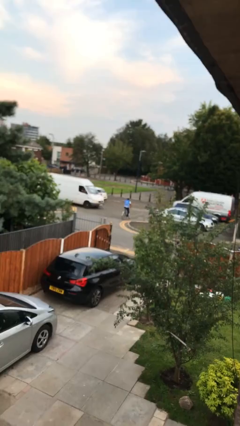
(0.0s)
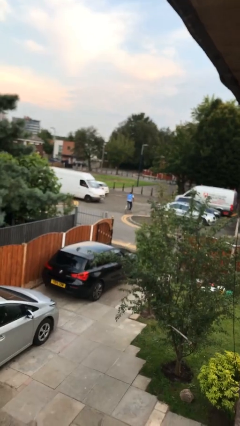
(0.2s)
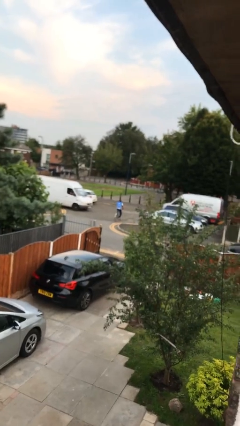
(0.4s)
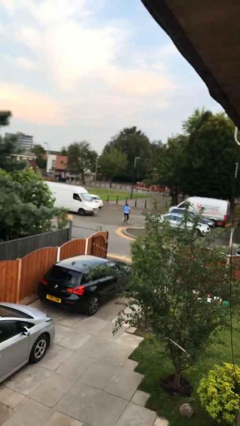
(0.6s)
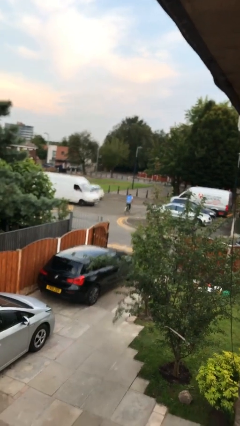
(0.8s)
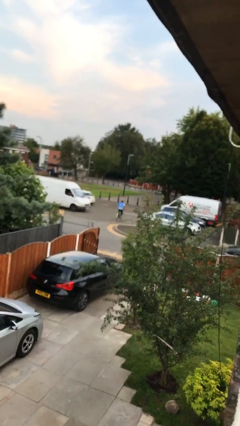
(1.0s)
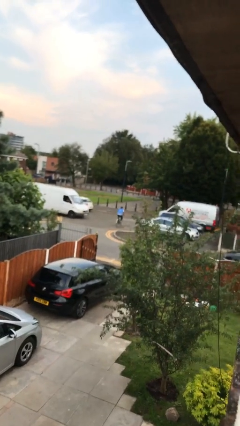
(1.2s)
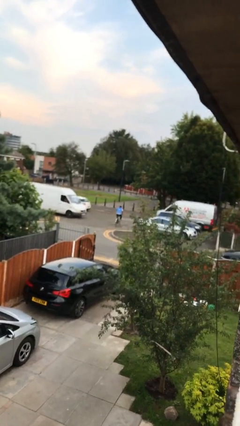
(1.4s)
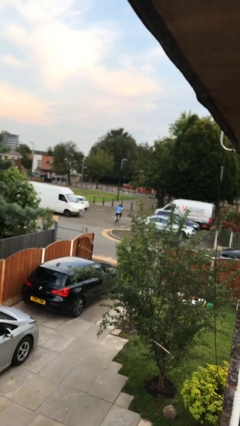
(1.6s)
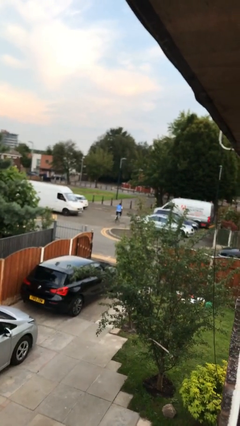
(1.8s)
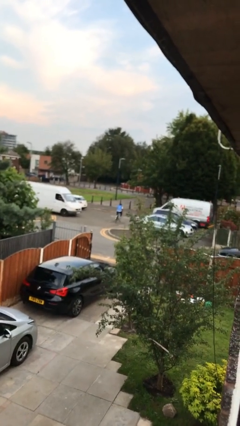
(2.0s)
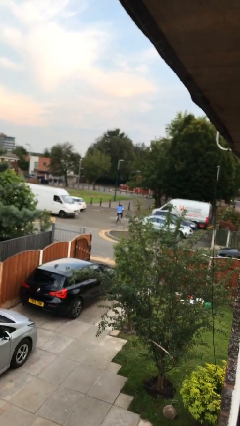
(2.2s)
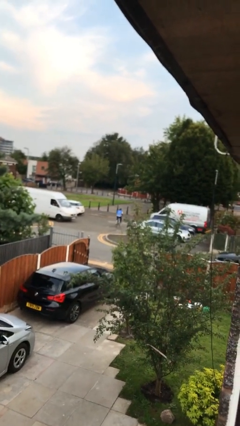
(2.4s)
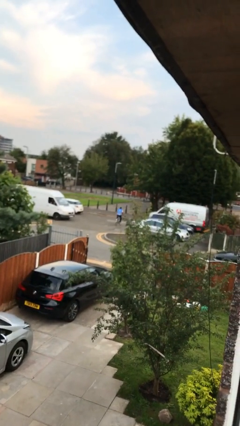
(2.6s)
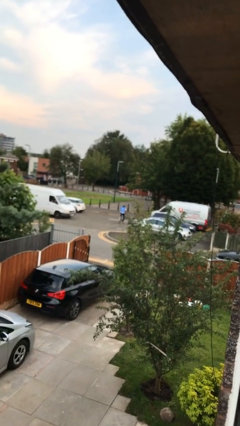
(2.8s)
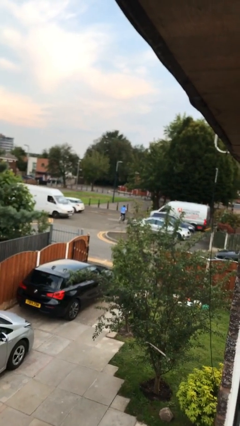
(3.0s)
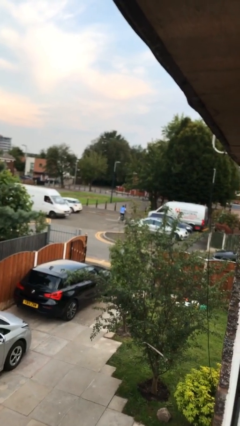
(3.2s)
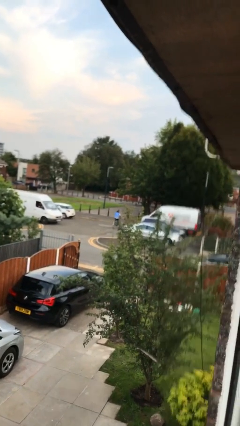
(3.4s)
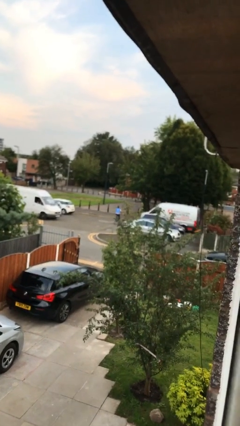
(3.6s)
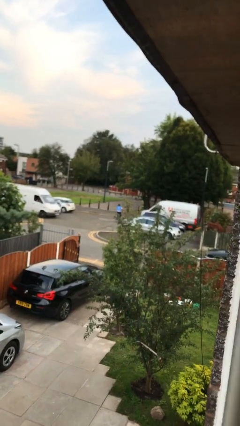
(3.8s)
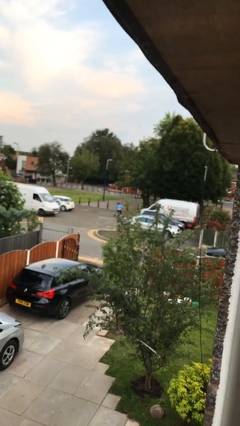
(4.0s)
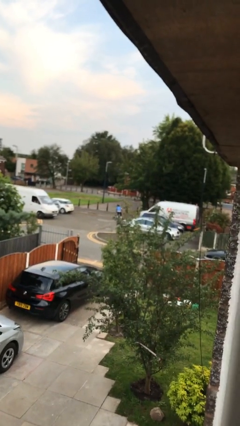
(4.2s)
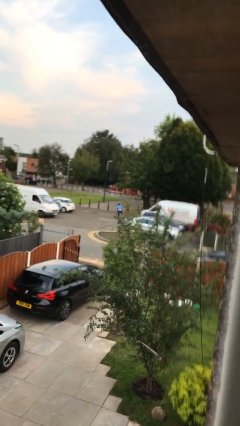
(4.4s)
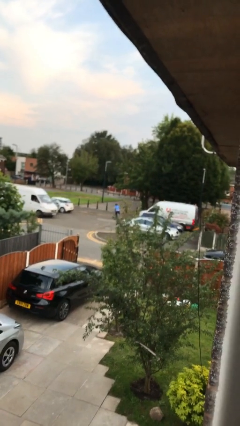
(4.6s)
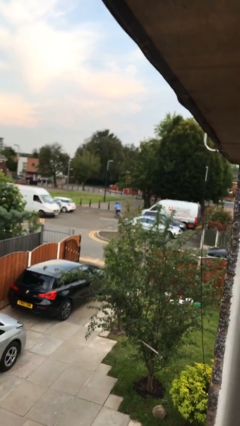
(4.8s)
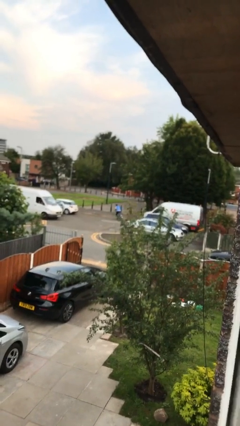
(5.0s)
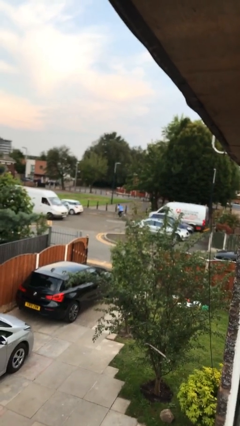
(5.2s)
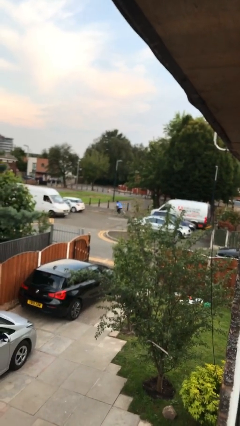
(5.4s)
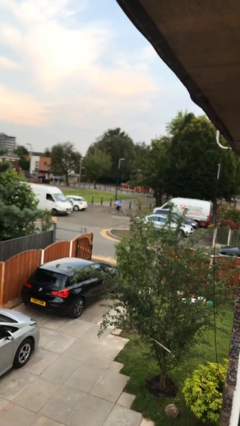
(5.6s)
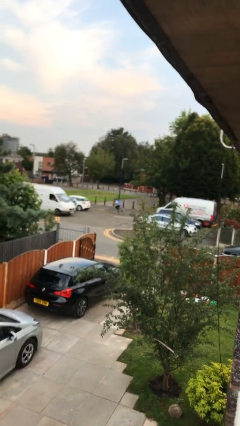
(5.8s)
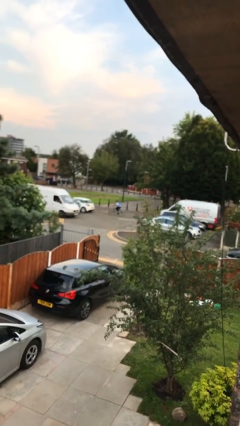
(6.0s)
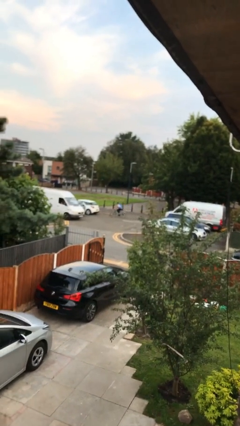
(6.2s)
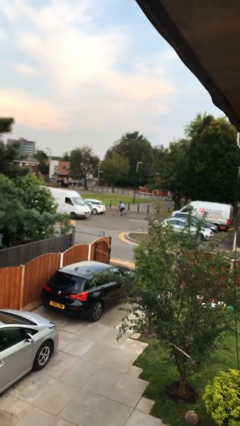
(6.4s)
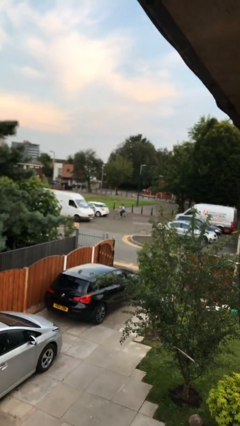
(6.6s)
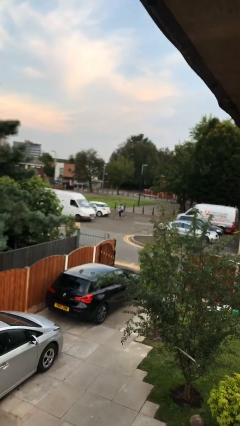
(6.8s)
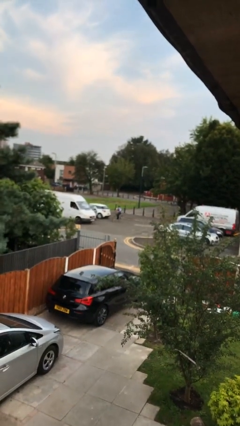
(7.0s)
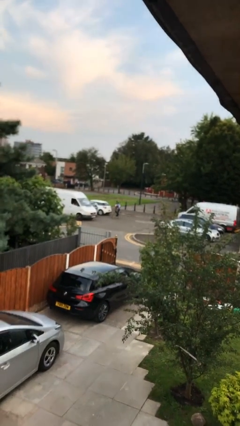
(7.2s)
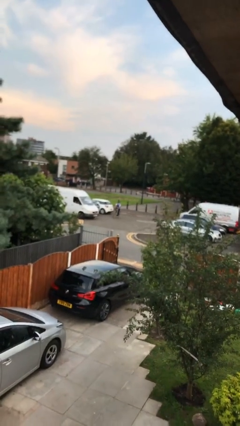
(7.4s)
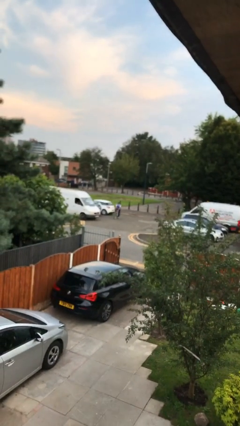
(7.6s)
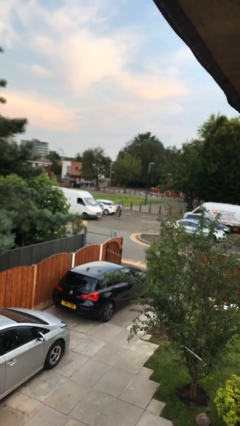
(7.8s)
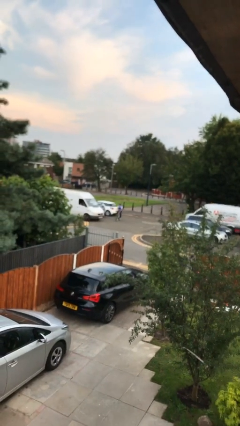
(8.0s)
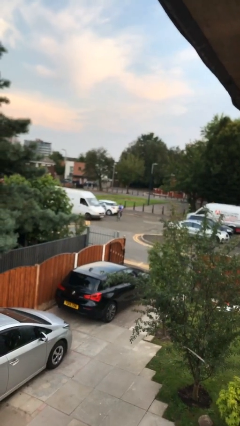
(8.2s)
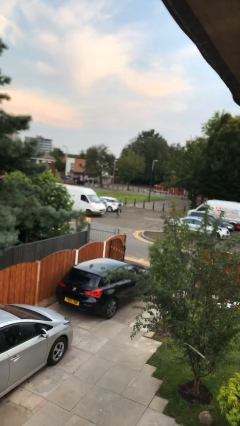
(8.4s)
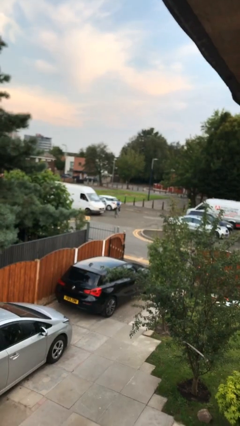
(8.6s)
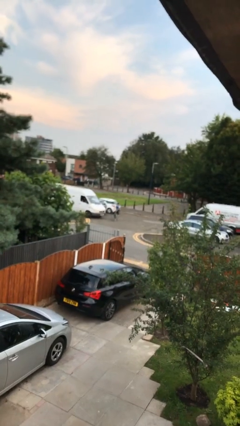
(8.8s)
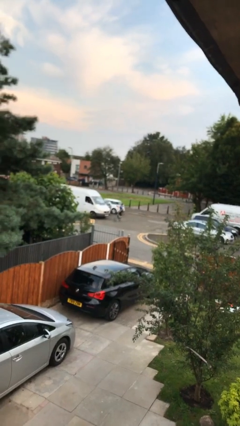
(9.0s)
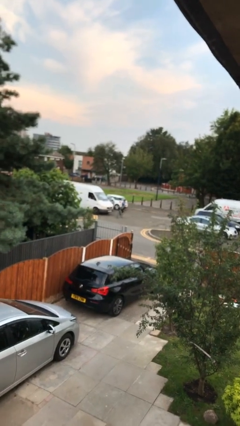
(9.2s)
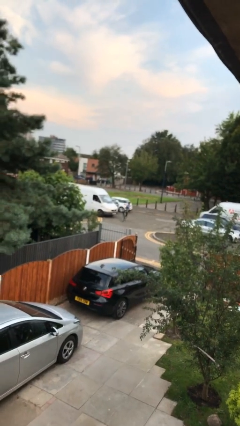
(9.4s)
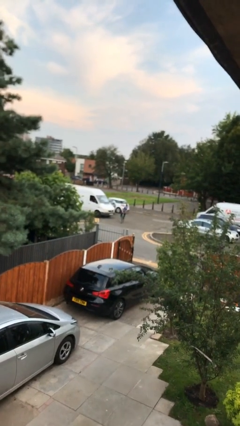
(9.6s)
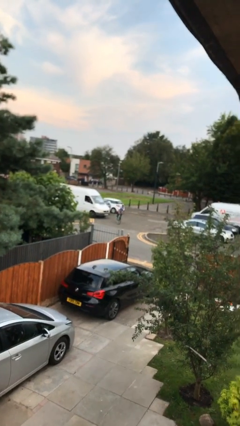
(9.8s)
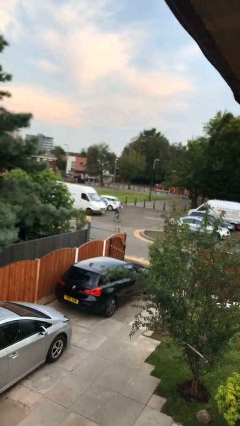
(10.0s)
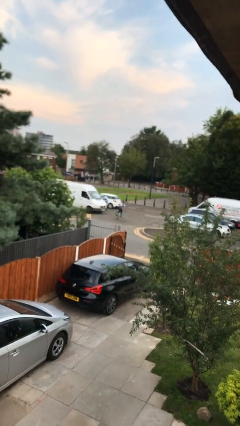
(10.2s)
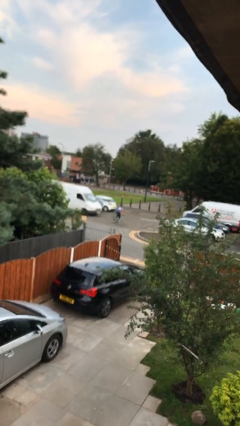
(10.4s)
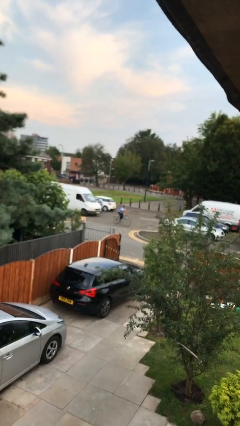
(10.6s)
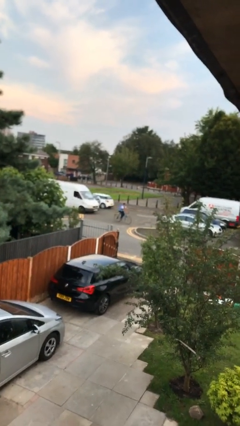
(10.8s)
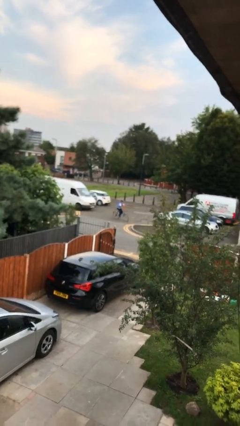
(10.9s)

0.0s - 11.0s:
person rides bicycle

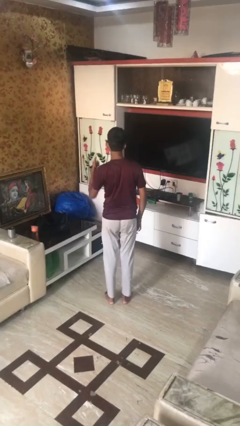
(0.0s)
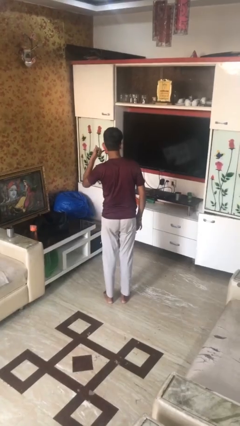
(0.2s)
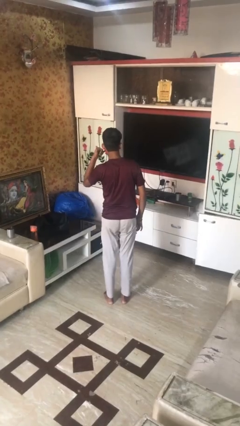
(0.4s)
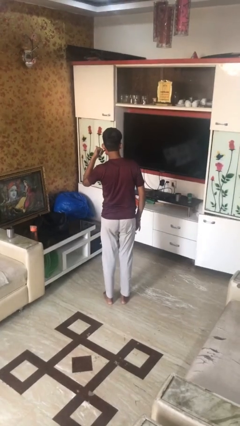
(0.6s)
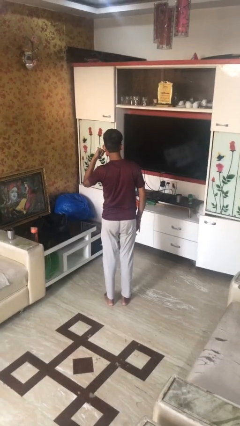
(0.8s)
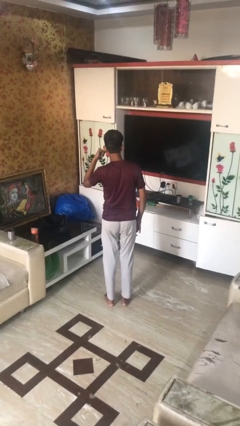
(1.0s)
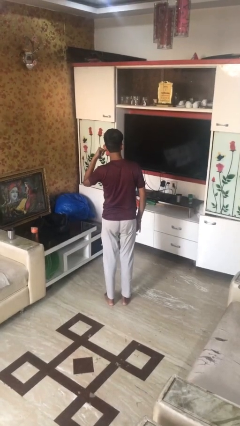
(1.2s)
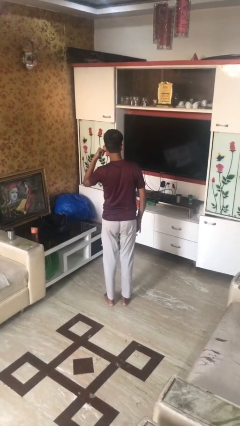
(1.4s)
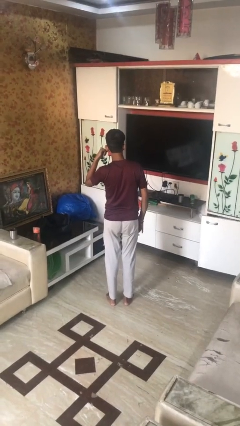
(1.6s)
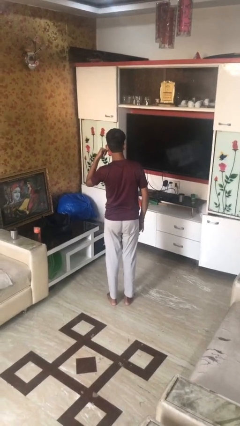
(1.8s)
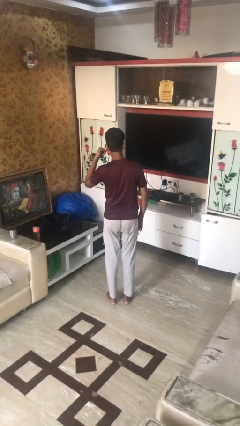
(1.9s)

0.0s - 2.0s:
person gestures call me

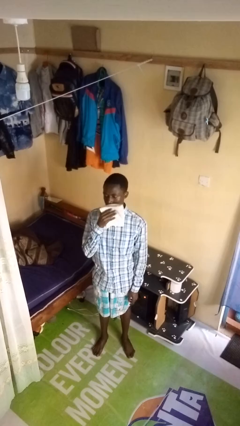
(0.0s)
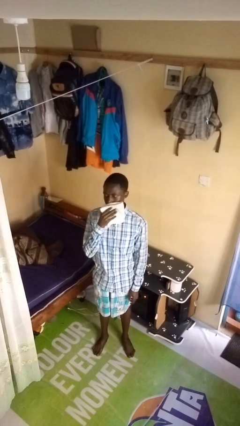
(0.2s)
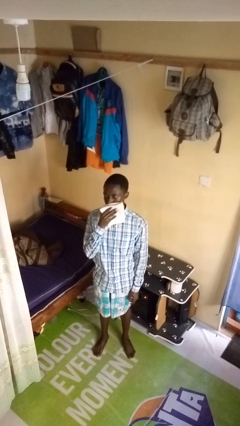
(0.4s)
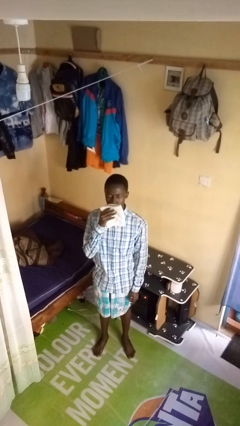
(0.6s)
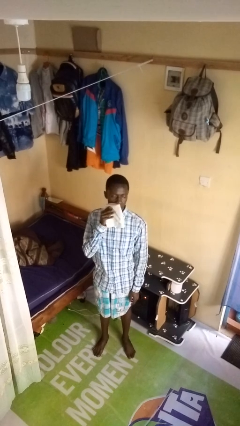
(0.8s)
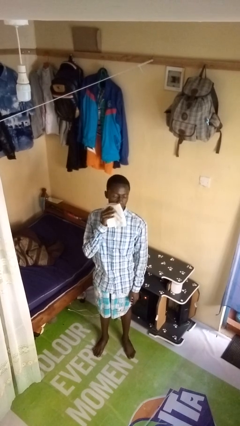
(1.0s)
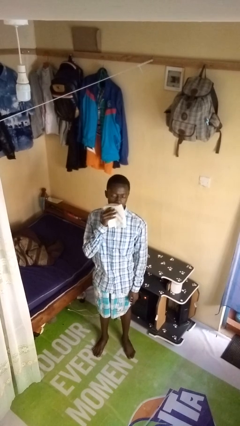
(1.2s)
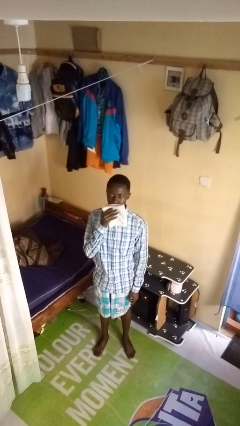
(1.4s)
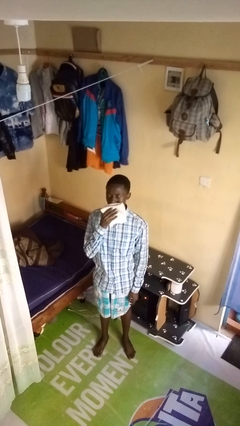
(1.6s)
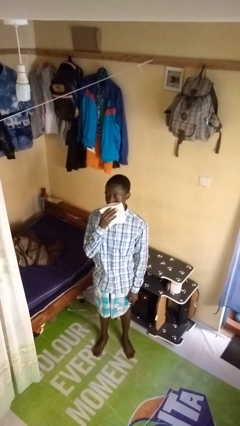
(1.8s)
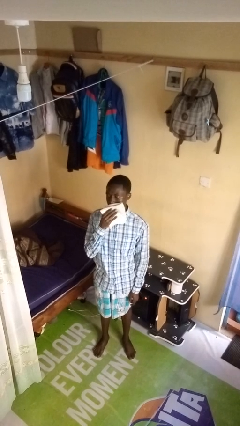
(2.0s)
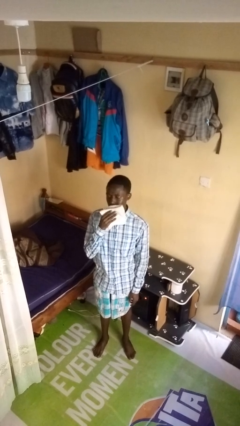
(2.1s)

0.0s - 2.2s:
person wipes mouth with napkin

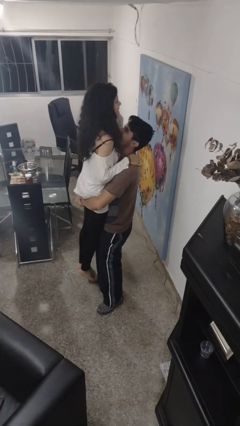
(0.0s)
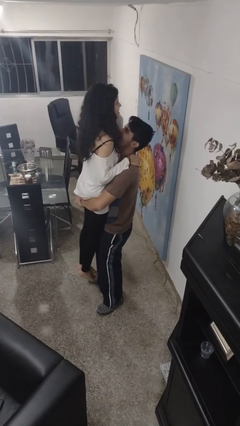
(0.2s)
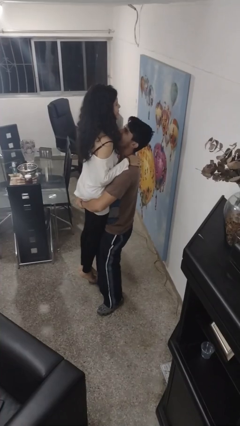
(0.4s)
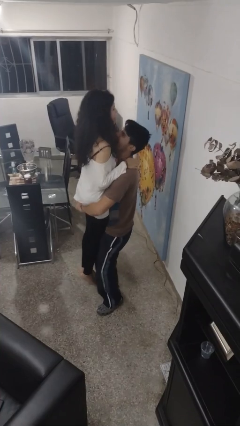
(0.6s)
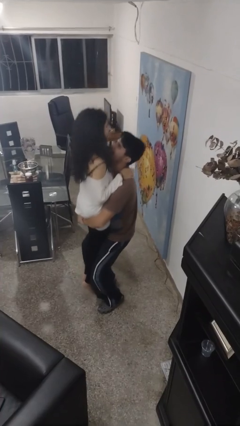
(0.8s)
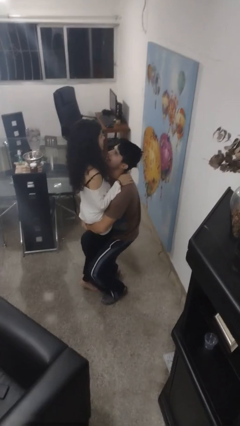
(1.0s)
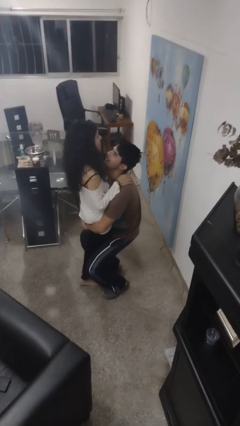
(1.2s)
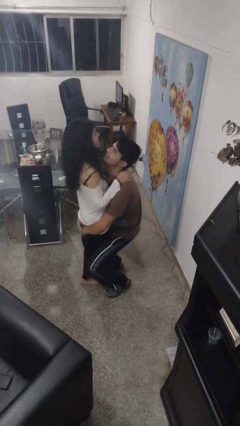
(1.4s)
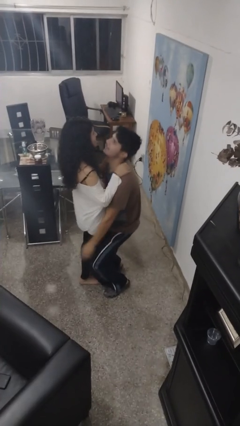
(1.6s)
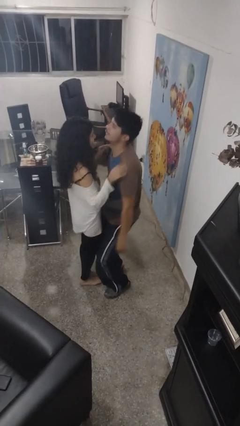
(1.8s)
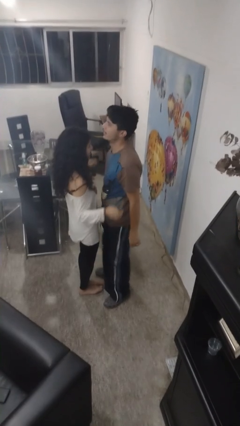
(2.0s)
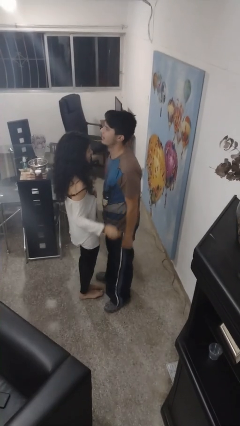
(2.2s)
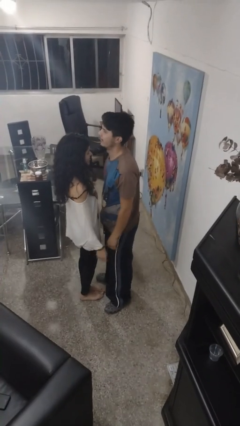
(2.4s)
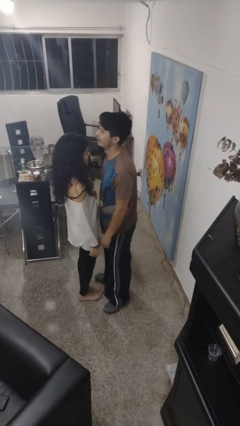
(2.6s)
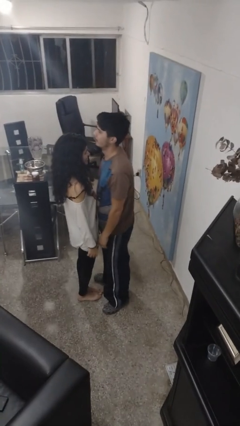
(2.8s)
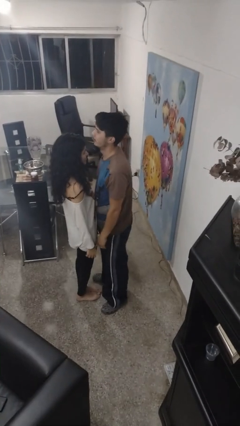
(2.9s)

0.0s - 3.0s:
person puts down person
